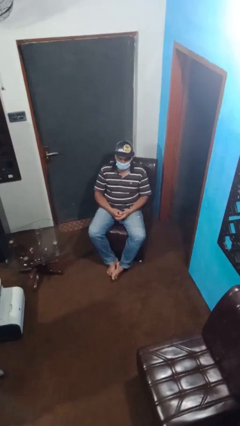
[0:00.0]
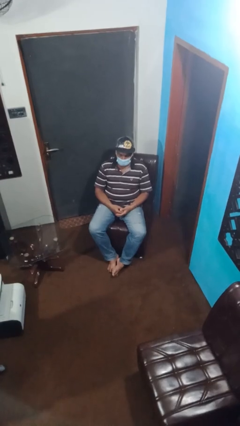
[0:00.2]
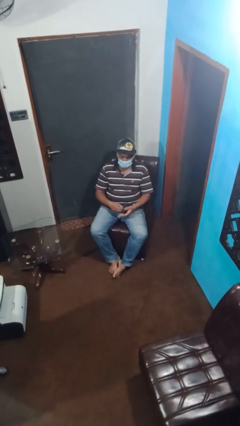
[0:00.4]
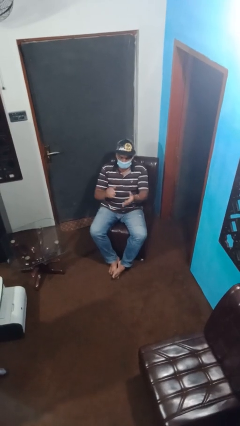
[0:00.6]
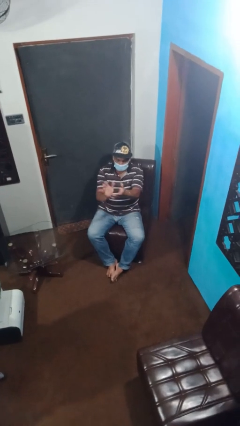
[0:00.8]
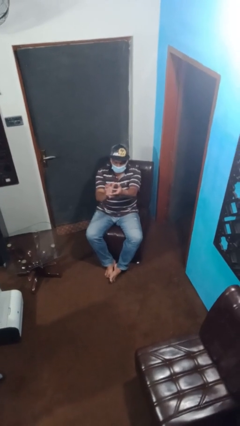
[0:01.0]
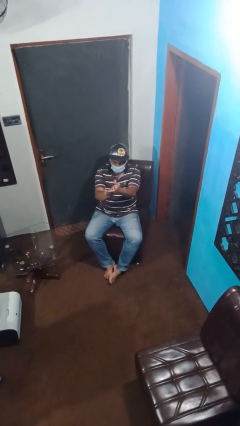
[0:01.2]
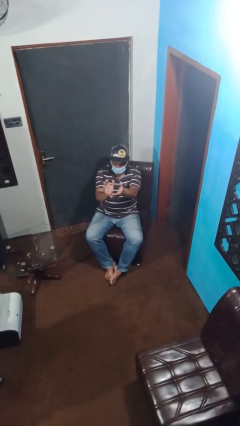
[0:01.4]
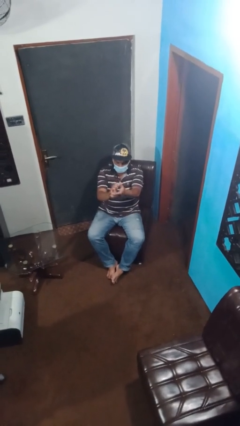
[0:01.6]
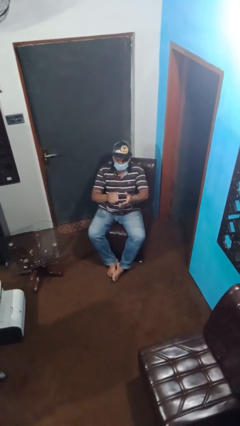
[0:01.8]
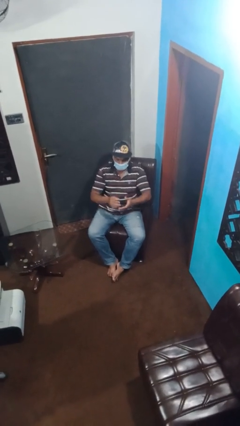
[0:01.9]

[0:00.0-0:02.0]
person claps hands

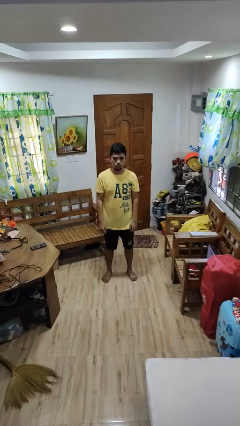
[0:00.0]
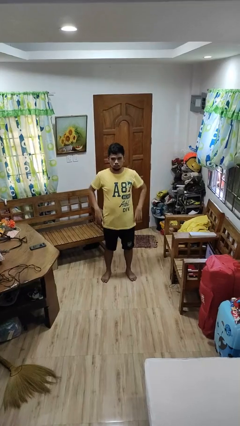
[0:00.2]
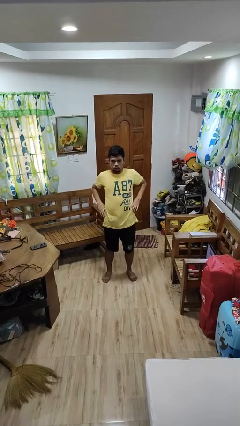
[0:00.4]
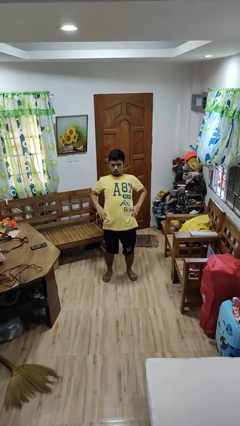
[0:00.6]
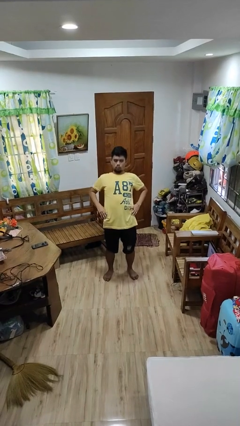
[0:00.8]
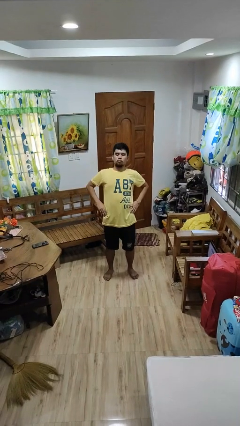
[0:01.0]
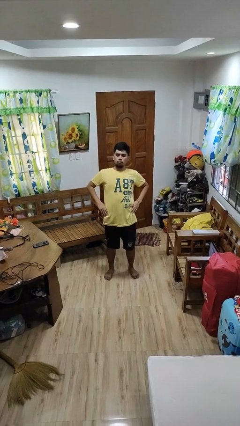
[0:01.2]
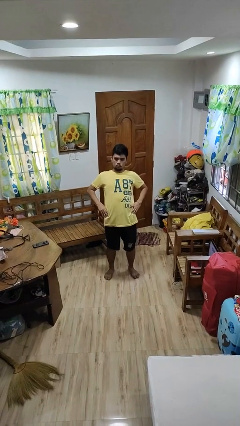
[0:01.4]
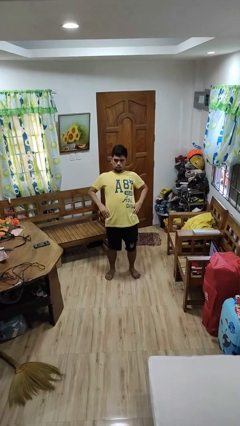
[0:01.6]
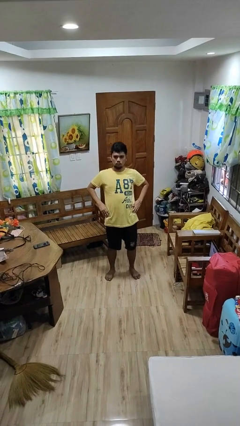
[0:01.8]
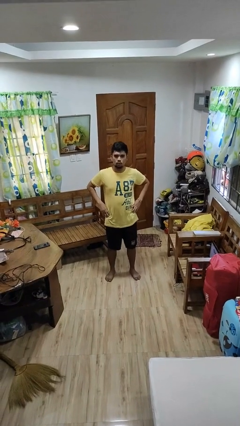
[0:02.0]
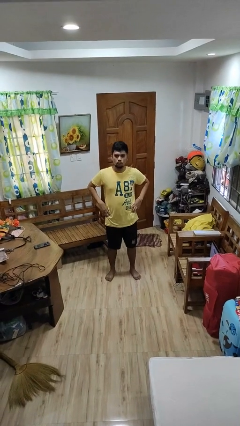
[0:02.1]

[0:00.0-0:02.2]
person stretches back

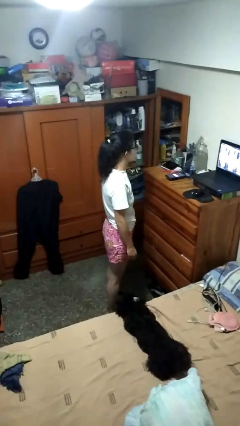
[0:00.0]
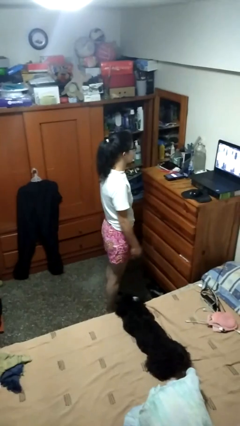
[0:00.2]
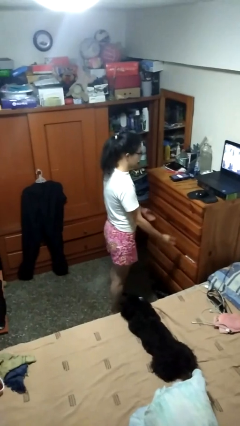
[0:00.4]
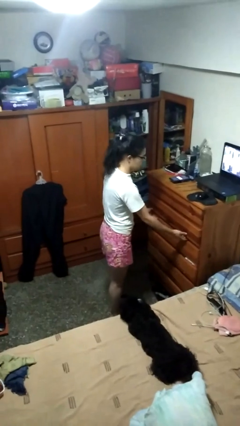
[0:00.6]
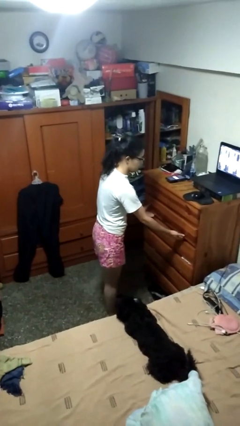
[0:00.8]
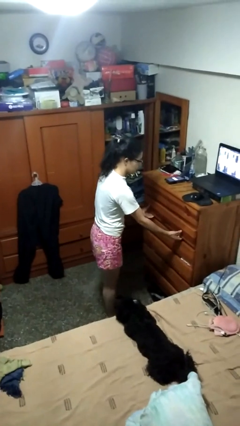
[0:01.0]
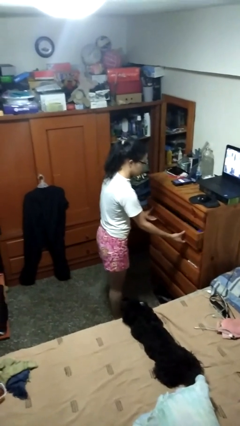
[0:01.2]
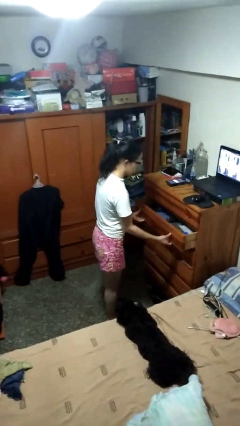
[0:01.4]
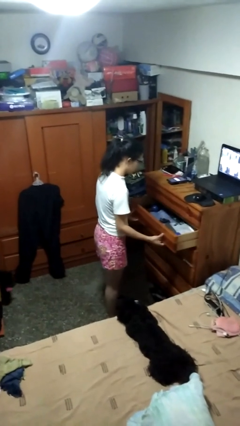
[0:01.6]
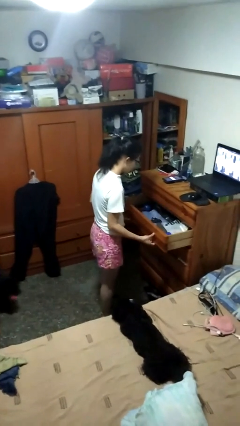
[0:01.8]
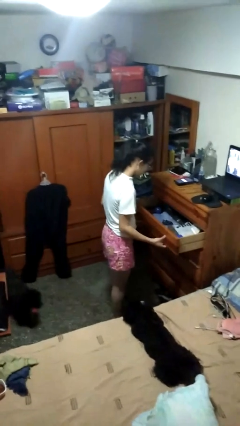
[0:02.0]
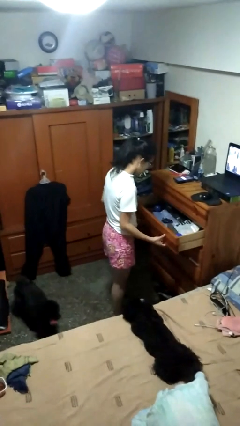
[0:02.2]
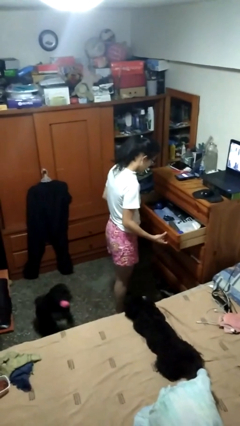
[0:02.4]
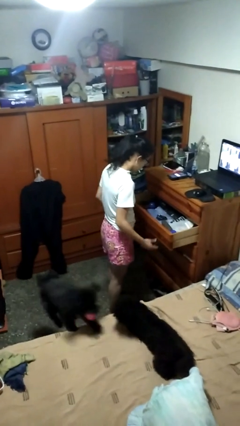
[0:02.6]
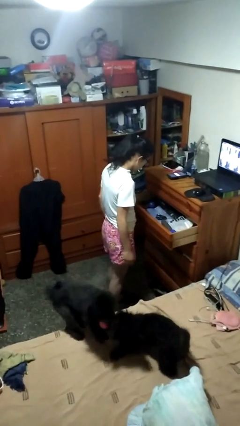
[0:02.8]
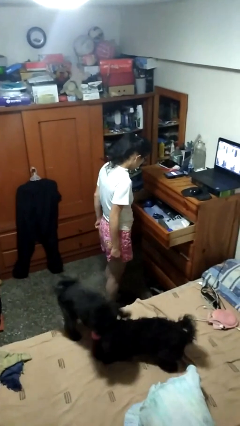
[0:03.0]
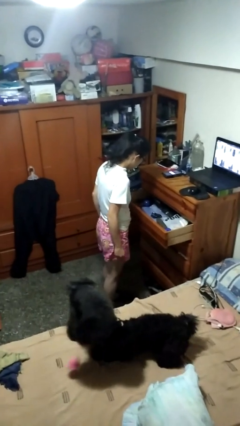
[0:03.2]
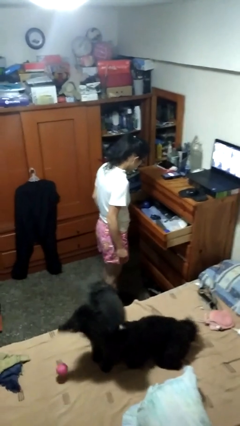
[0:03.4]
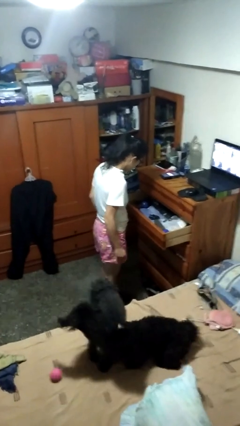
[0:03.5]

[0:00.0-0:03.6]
person opens dresser drawer

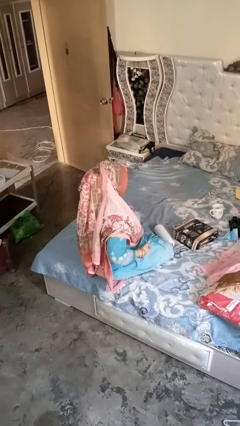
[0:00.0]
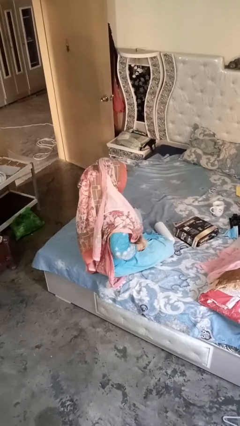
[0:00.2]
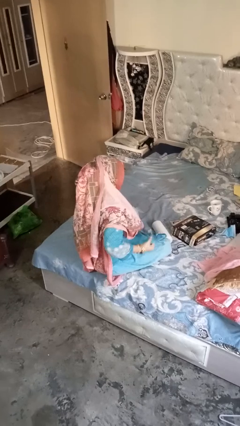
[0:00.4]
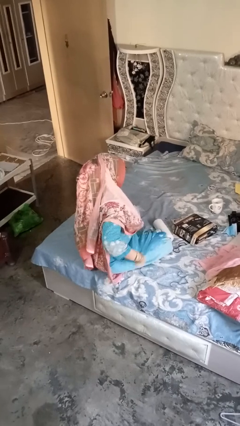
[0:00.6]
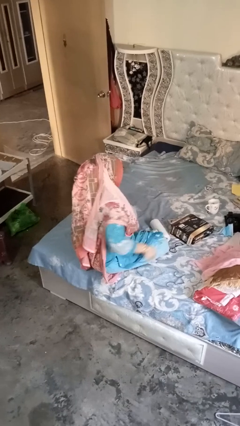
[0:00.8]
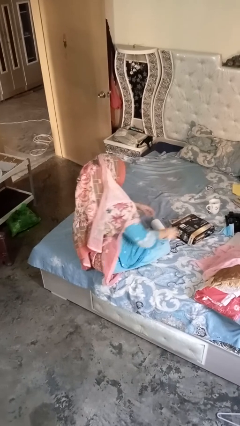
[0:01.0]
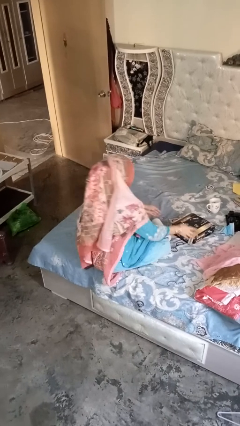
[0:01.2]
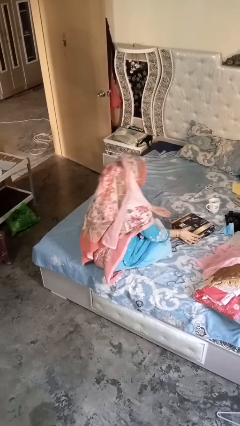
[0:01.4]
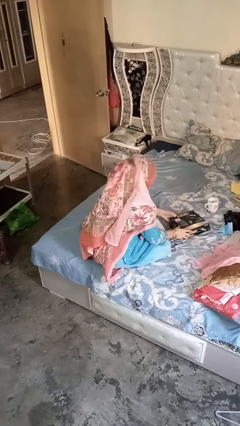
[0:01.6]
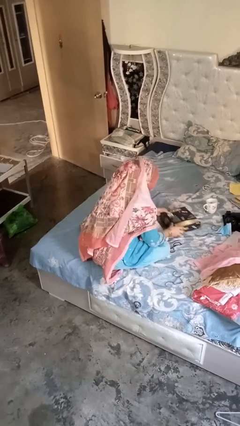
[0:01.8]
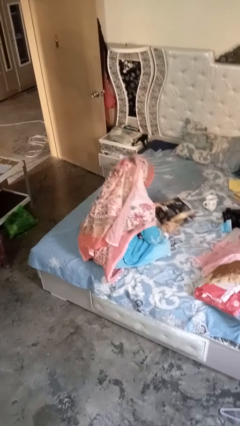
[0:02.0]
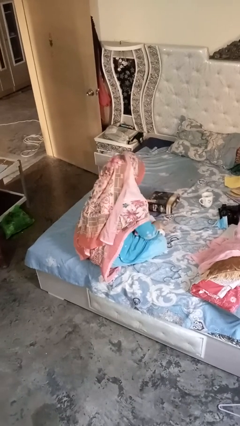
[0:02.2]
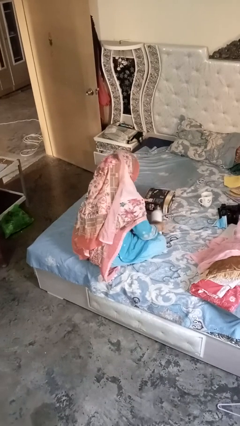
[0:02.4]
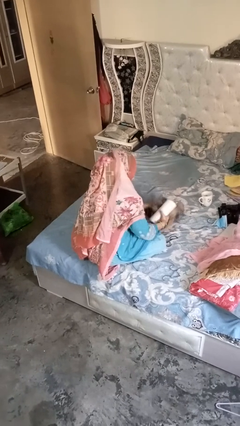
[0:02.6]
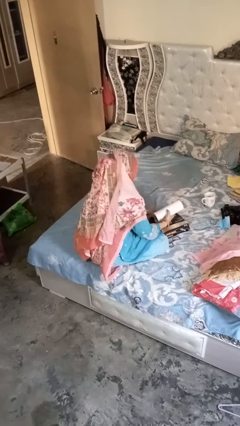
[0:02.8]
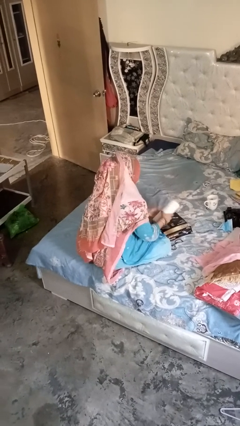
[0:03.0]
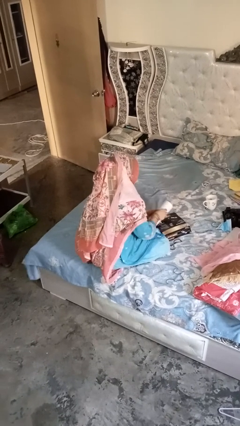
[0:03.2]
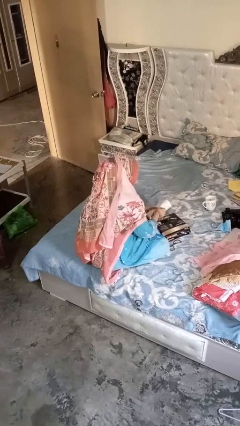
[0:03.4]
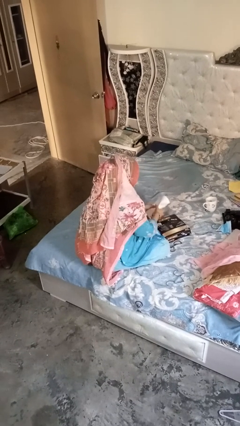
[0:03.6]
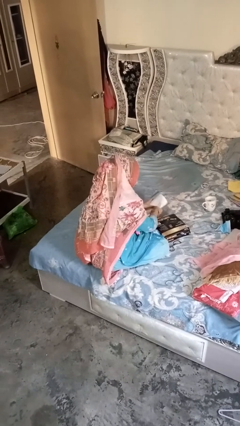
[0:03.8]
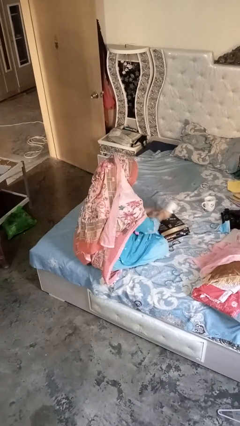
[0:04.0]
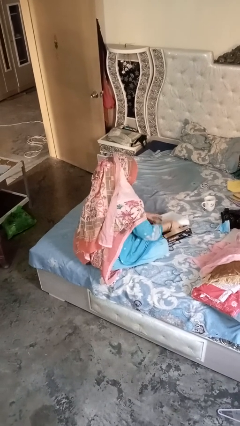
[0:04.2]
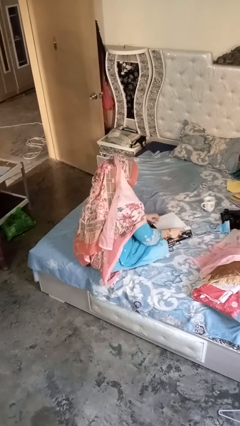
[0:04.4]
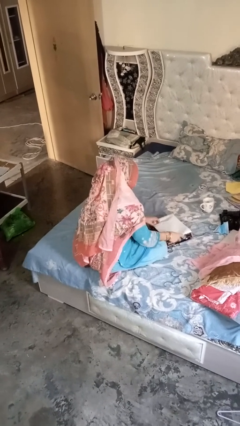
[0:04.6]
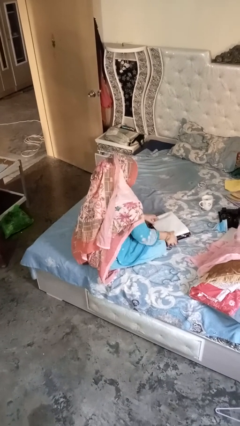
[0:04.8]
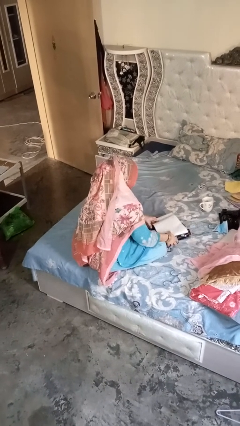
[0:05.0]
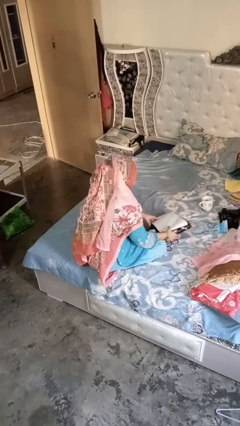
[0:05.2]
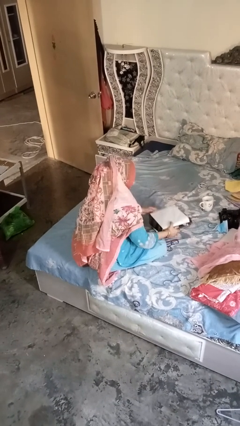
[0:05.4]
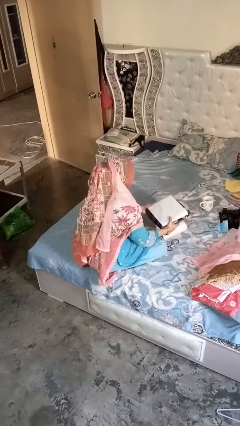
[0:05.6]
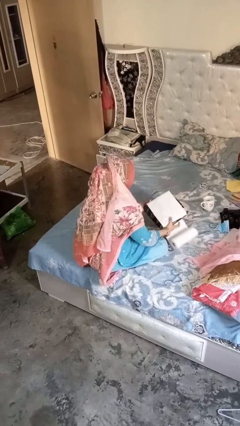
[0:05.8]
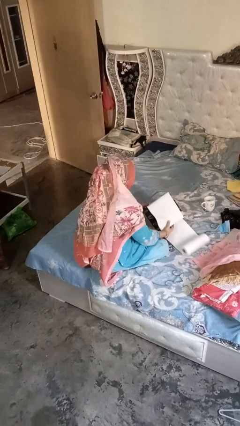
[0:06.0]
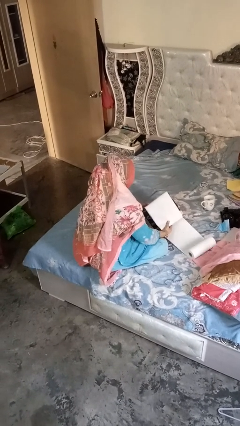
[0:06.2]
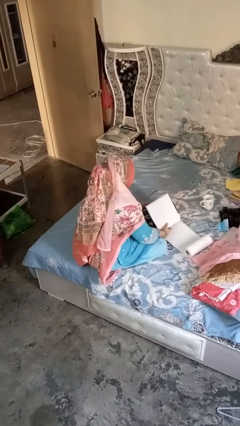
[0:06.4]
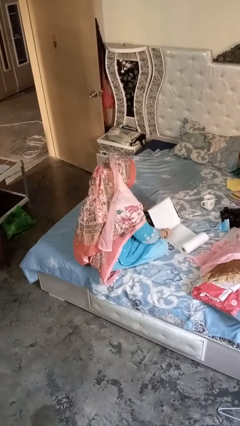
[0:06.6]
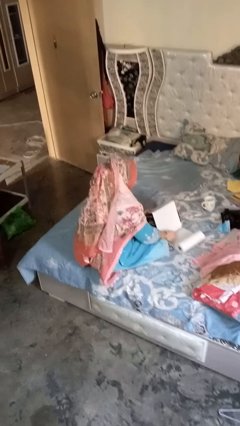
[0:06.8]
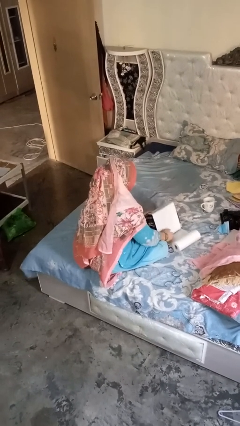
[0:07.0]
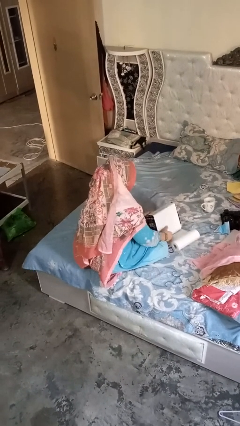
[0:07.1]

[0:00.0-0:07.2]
person wraps box

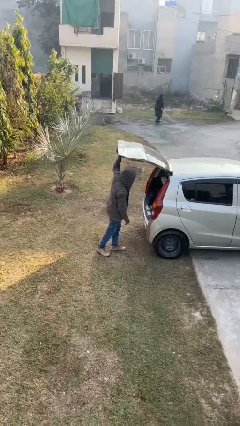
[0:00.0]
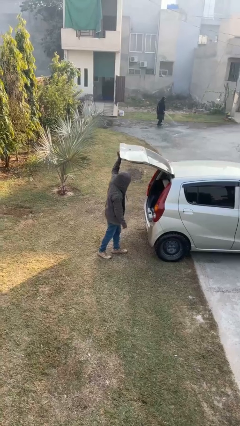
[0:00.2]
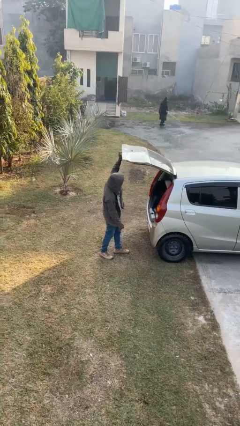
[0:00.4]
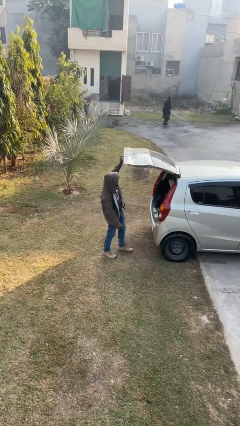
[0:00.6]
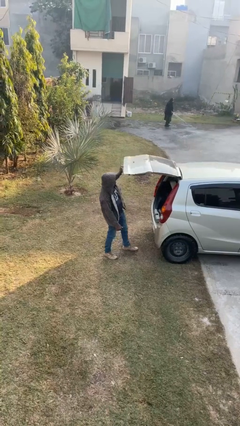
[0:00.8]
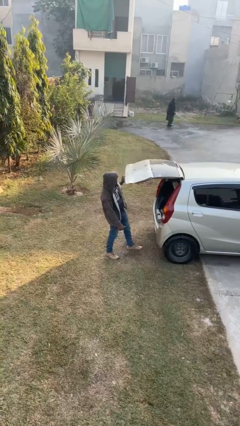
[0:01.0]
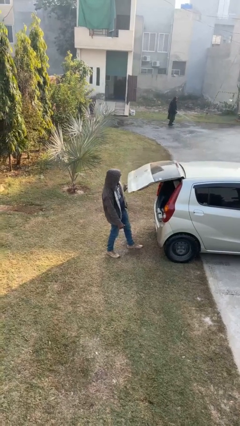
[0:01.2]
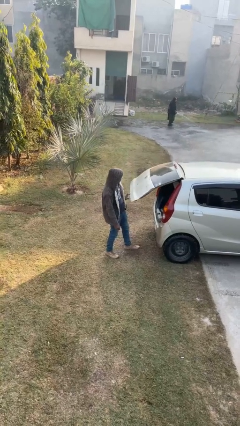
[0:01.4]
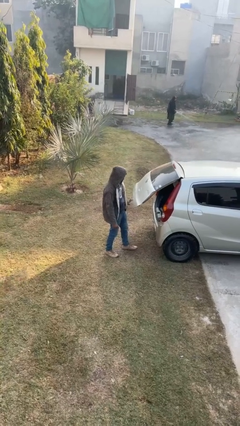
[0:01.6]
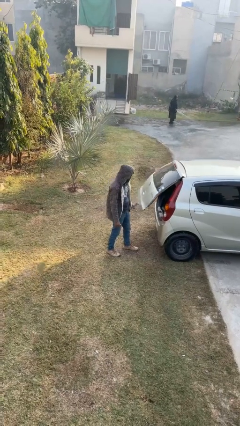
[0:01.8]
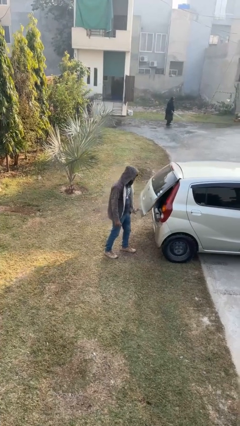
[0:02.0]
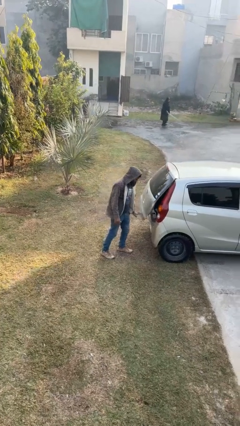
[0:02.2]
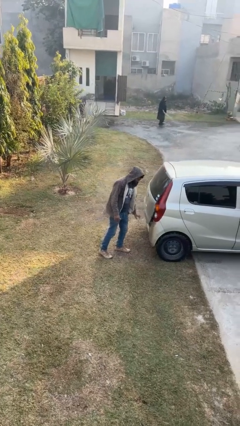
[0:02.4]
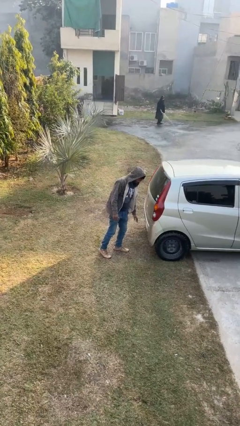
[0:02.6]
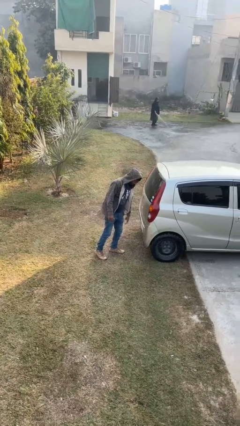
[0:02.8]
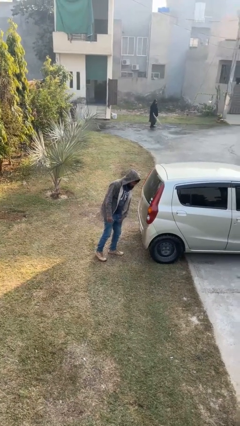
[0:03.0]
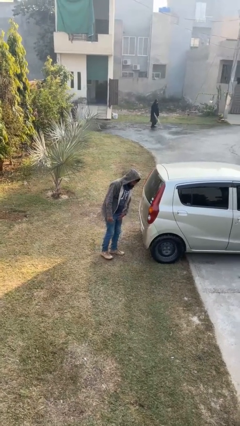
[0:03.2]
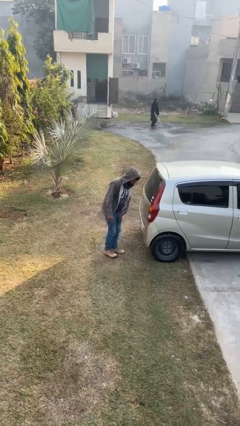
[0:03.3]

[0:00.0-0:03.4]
person closes car trunk
